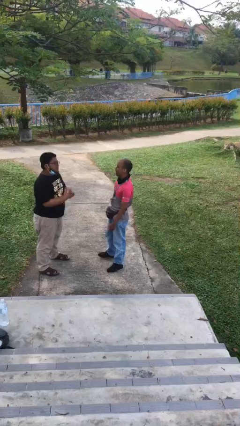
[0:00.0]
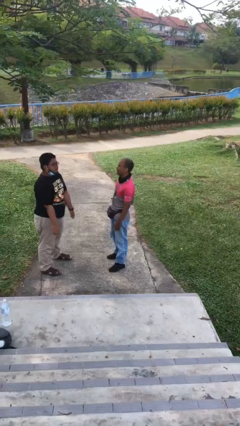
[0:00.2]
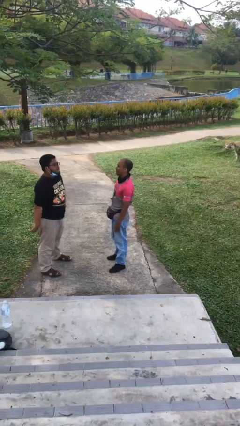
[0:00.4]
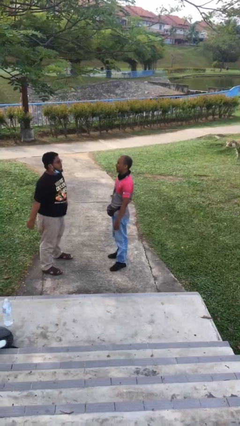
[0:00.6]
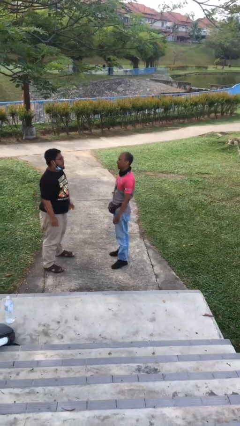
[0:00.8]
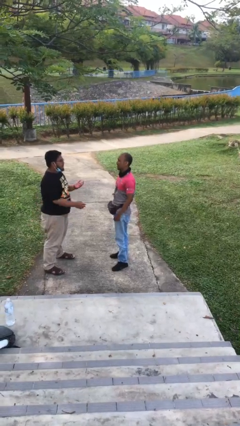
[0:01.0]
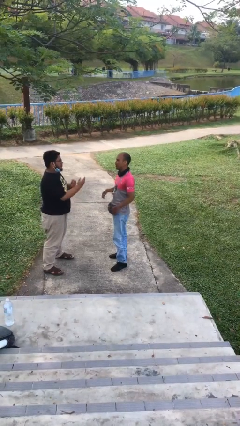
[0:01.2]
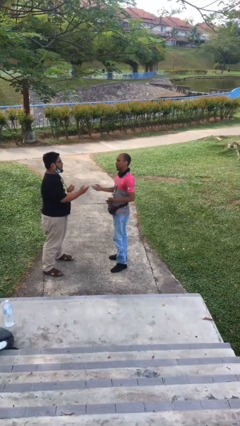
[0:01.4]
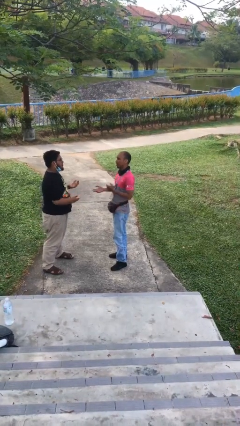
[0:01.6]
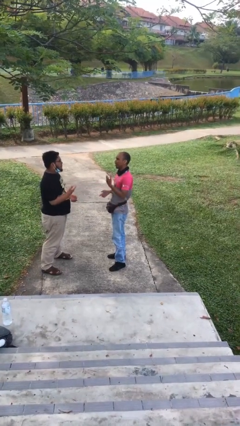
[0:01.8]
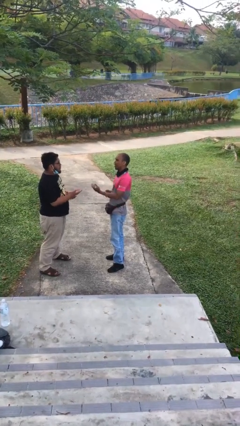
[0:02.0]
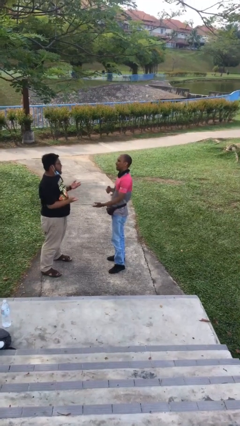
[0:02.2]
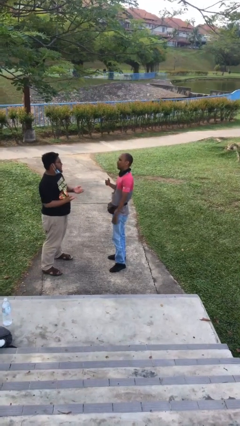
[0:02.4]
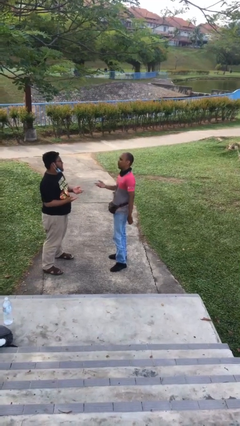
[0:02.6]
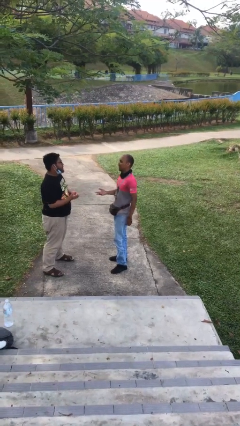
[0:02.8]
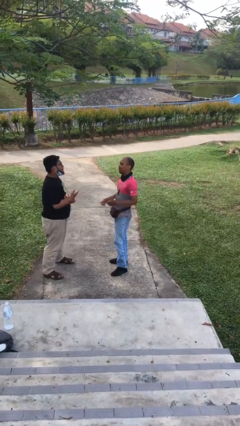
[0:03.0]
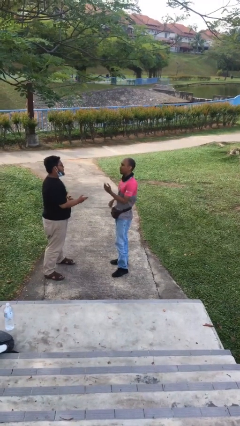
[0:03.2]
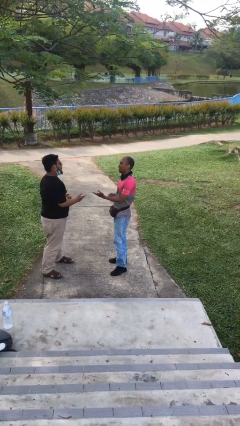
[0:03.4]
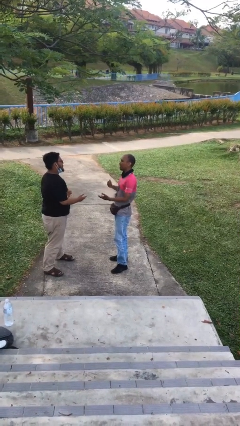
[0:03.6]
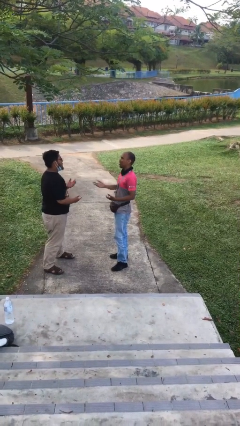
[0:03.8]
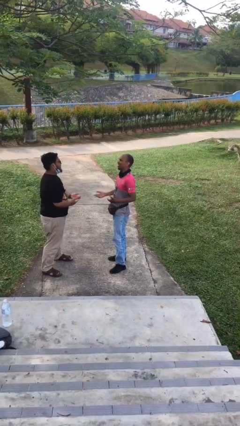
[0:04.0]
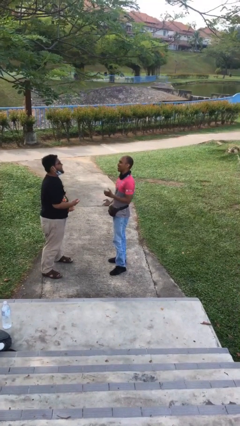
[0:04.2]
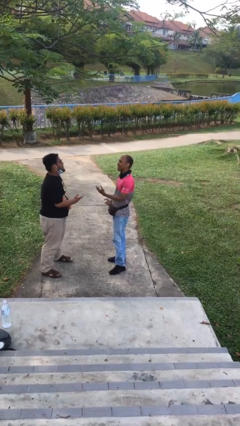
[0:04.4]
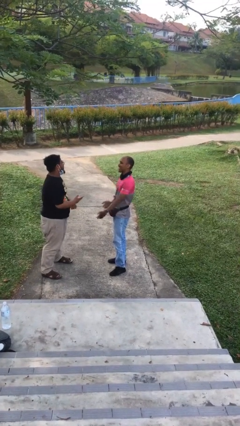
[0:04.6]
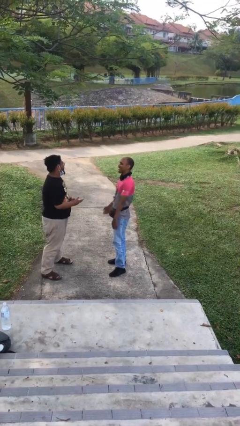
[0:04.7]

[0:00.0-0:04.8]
person talks to person

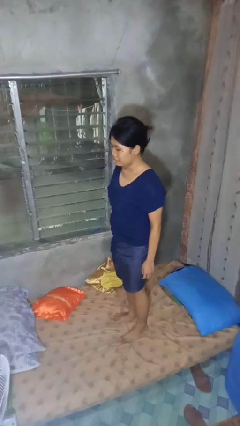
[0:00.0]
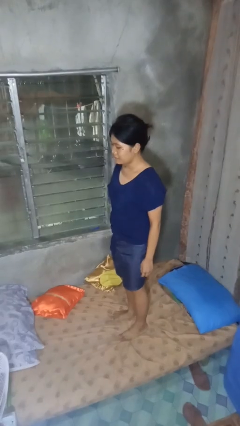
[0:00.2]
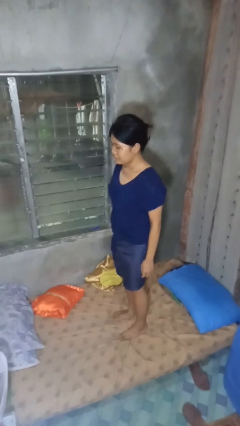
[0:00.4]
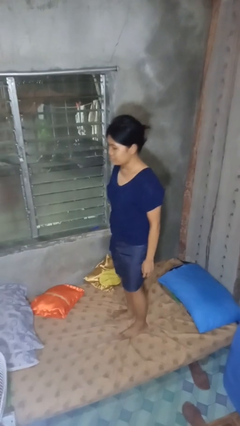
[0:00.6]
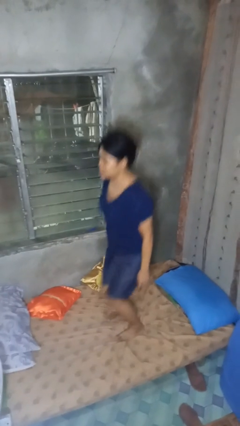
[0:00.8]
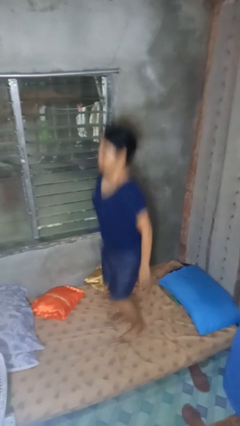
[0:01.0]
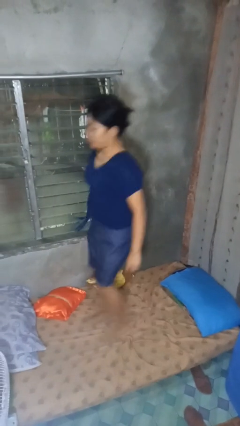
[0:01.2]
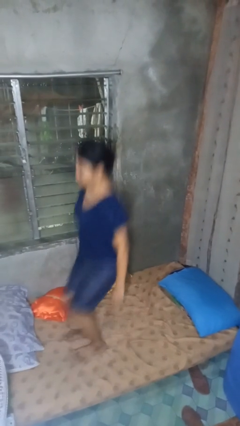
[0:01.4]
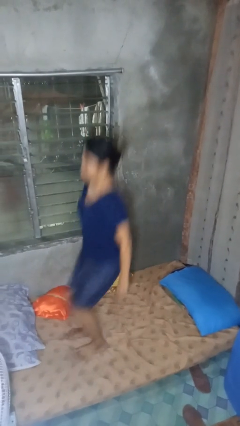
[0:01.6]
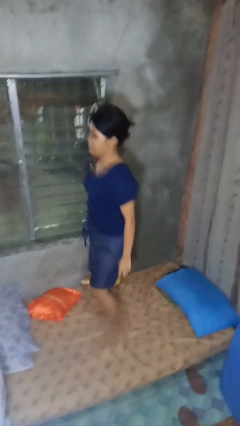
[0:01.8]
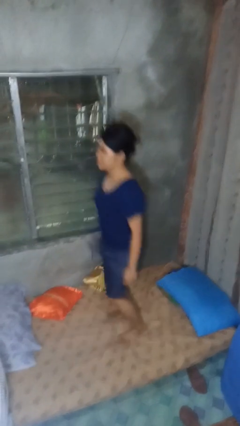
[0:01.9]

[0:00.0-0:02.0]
person jumps on bed

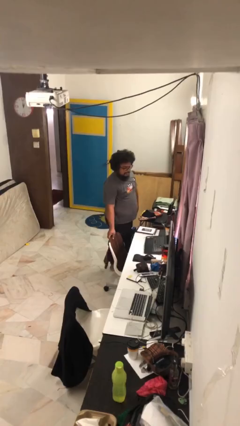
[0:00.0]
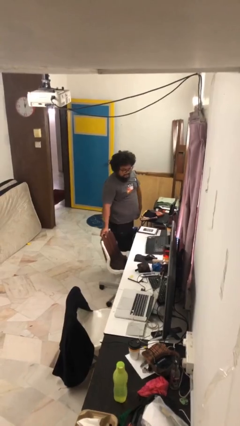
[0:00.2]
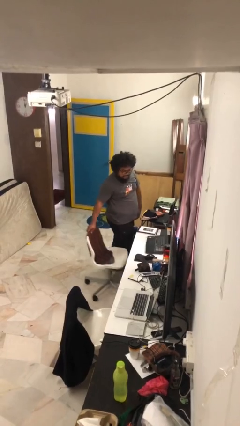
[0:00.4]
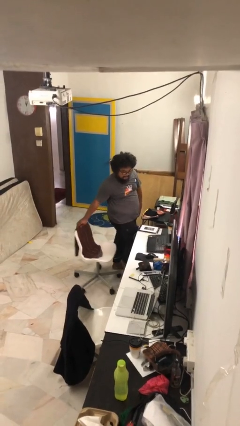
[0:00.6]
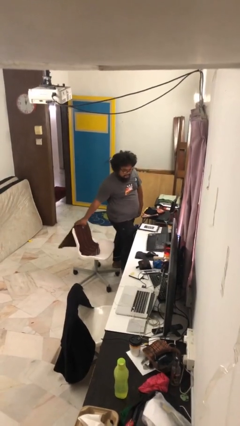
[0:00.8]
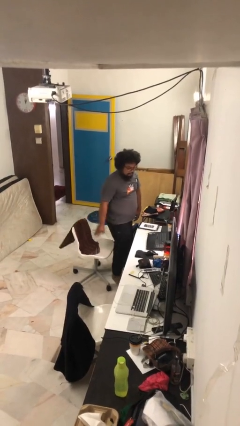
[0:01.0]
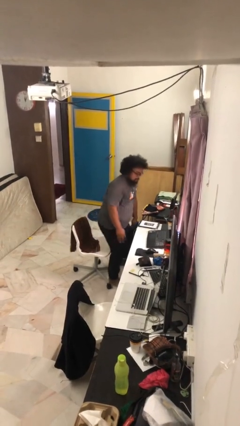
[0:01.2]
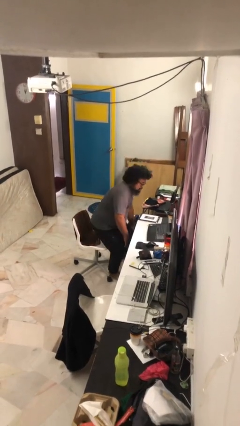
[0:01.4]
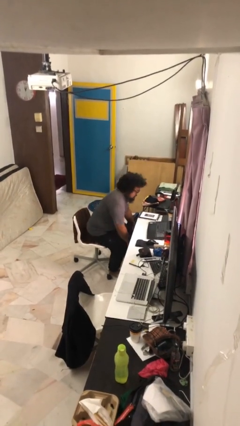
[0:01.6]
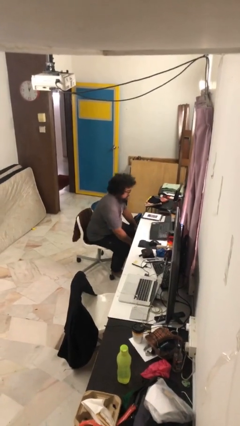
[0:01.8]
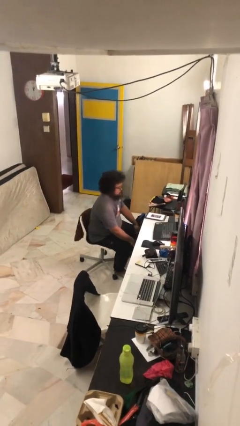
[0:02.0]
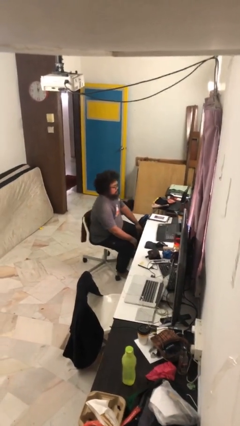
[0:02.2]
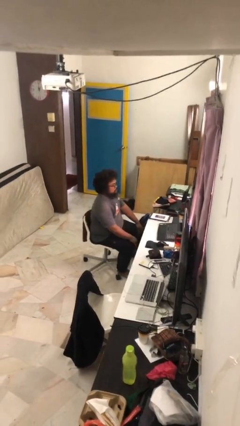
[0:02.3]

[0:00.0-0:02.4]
person sits down

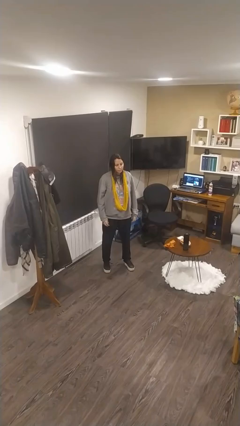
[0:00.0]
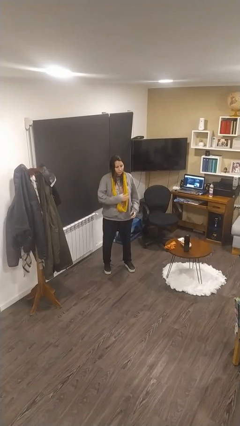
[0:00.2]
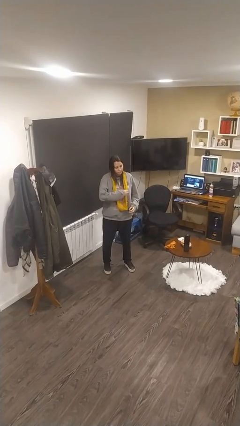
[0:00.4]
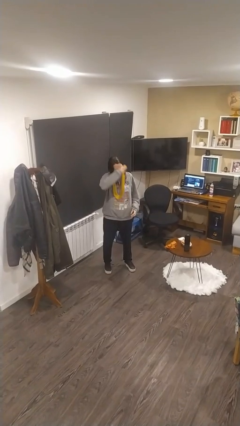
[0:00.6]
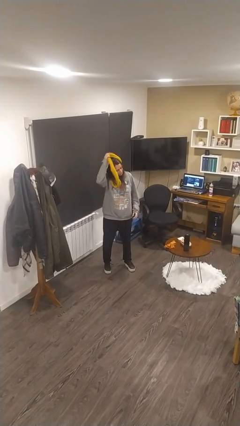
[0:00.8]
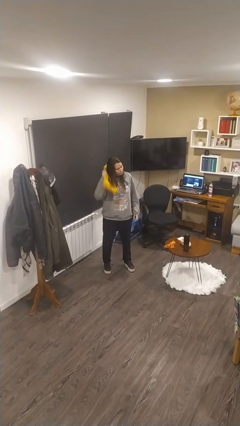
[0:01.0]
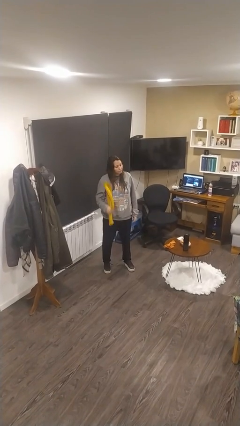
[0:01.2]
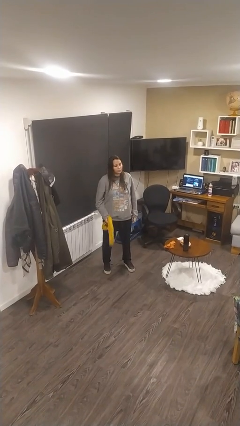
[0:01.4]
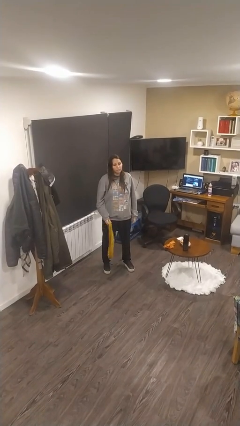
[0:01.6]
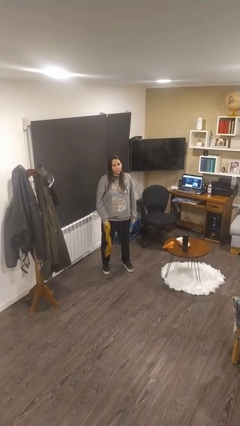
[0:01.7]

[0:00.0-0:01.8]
person takes off scarf

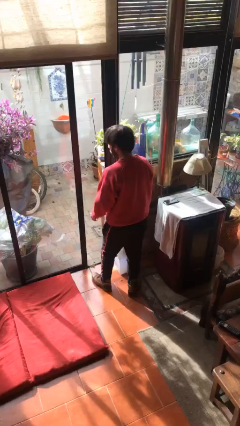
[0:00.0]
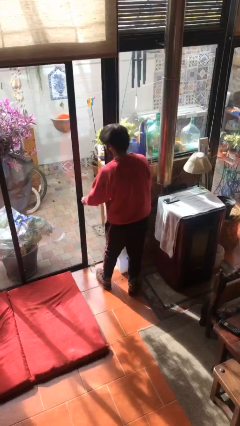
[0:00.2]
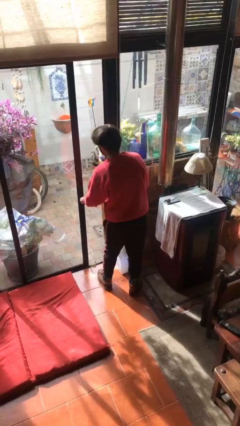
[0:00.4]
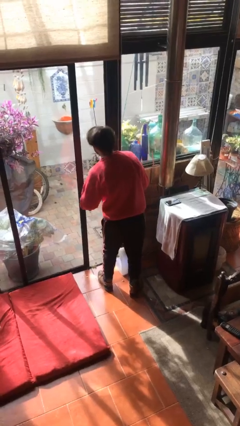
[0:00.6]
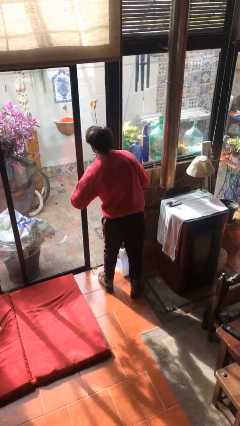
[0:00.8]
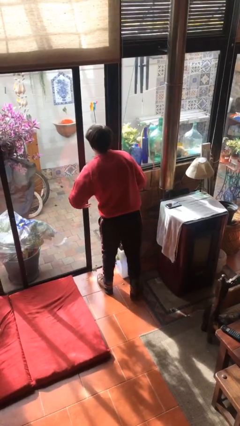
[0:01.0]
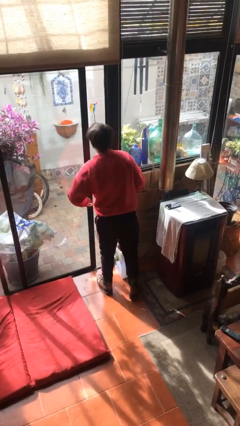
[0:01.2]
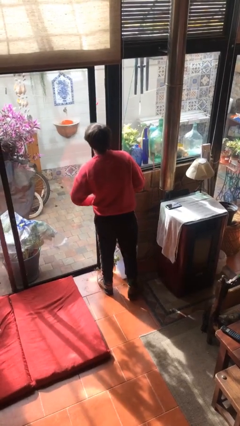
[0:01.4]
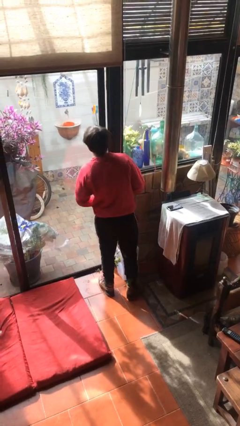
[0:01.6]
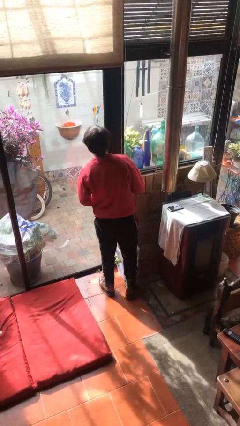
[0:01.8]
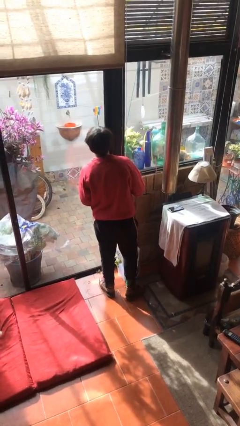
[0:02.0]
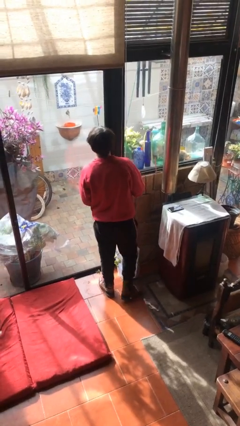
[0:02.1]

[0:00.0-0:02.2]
person closes sliding door

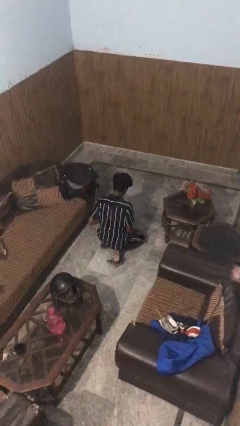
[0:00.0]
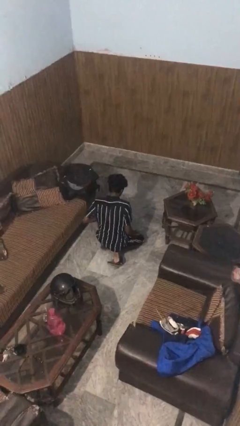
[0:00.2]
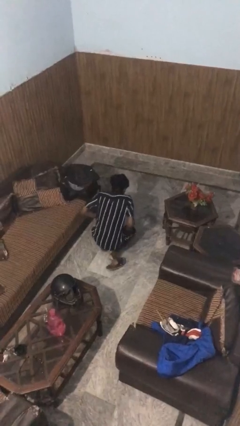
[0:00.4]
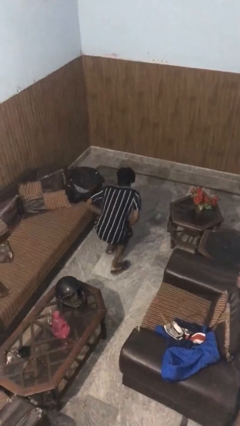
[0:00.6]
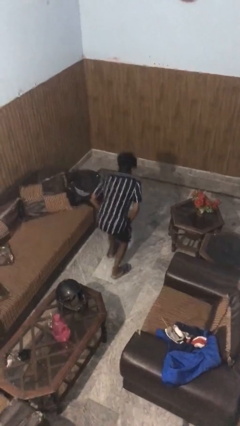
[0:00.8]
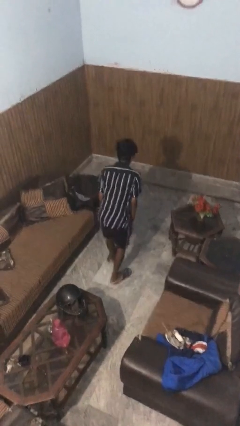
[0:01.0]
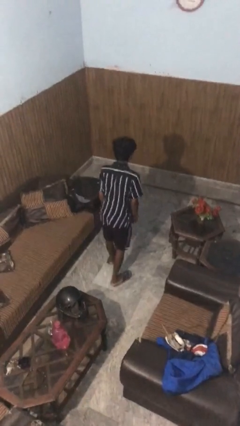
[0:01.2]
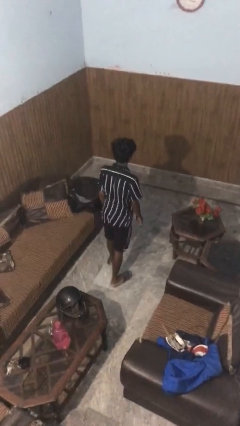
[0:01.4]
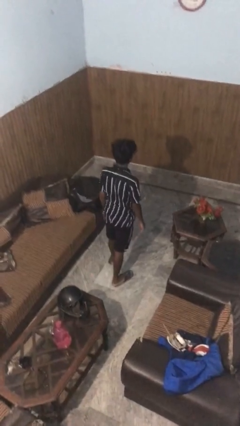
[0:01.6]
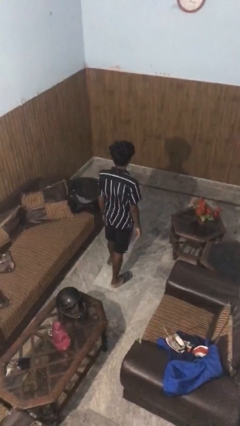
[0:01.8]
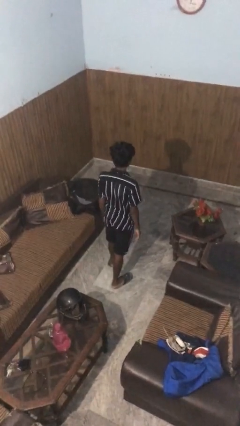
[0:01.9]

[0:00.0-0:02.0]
person stands up from floor

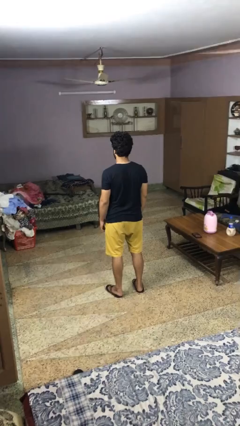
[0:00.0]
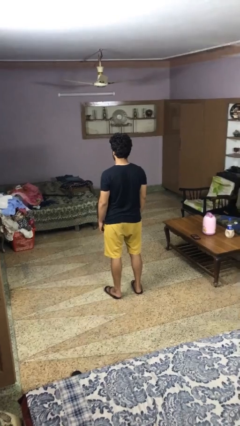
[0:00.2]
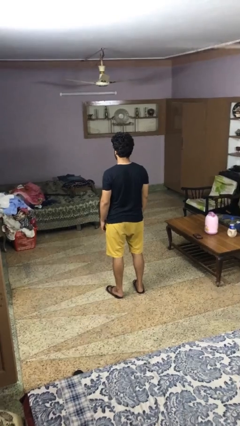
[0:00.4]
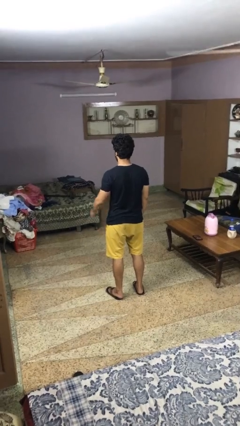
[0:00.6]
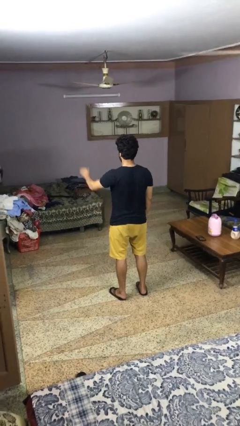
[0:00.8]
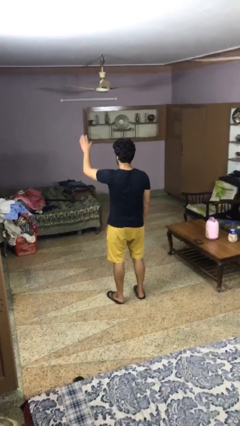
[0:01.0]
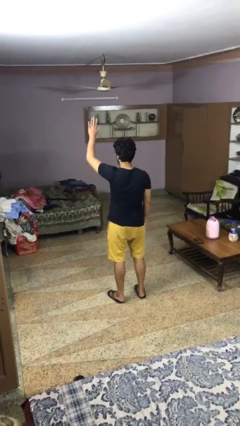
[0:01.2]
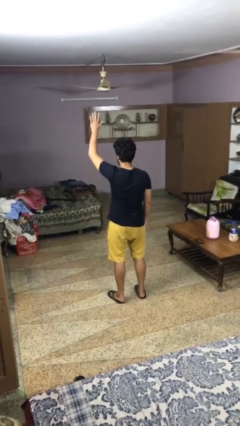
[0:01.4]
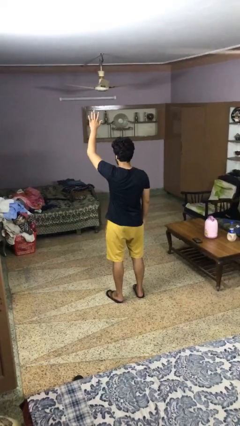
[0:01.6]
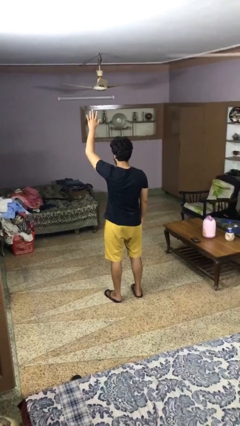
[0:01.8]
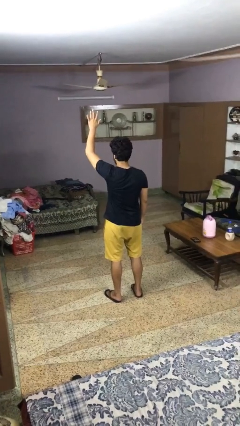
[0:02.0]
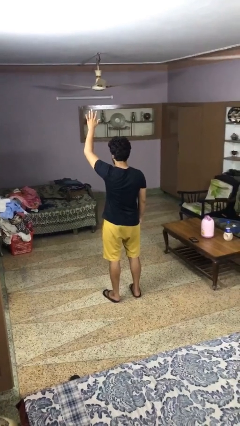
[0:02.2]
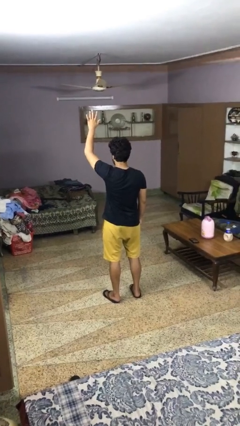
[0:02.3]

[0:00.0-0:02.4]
person gestures raise hand
